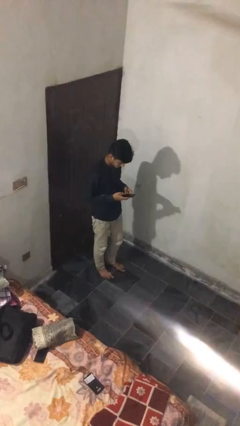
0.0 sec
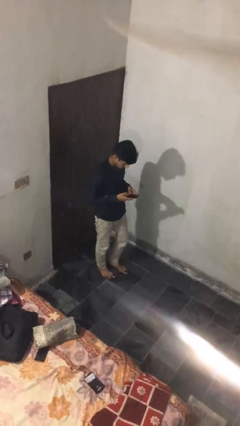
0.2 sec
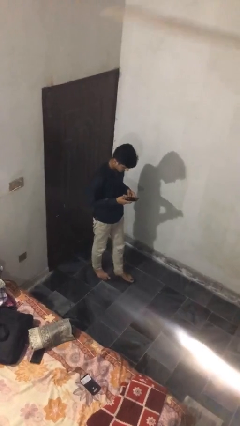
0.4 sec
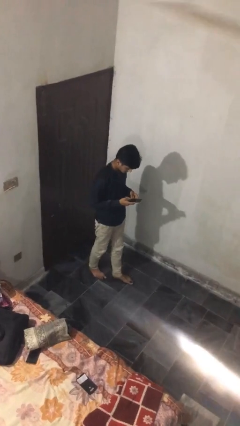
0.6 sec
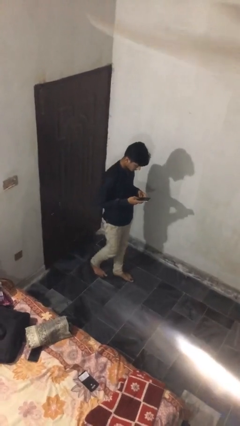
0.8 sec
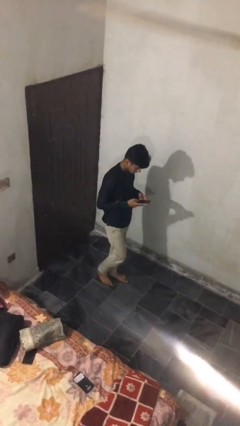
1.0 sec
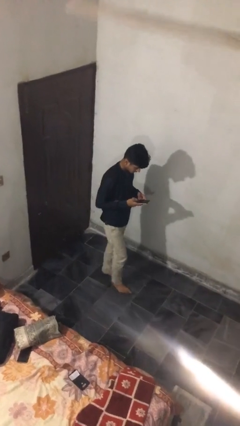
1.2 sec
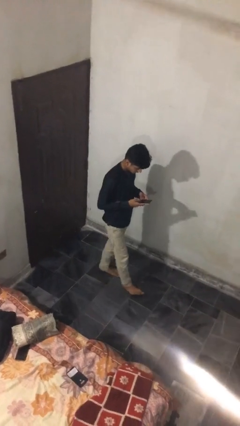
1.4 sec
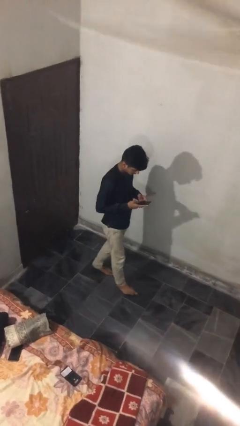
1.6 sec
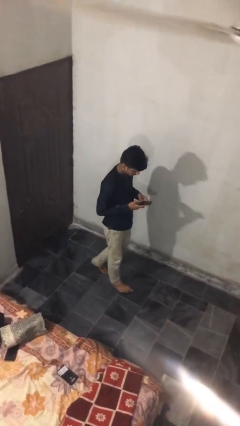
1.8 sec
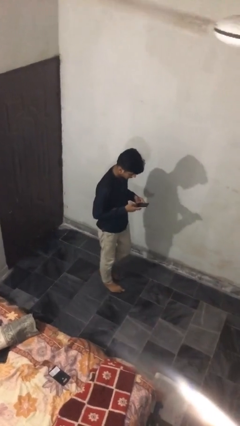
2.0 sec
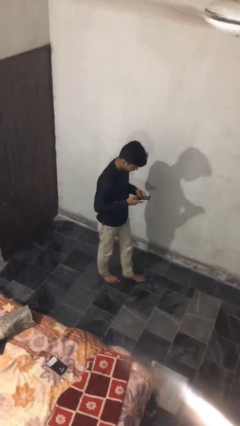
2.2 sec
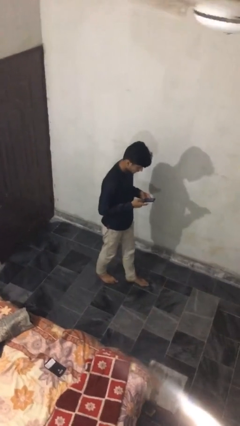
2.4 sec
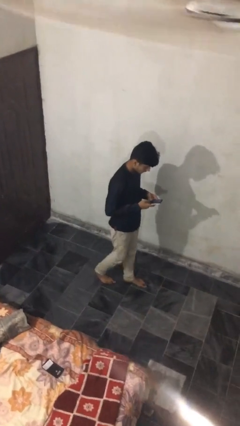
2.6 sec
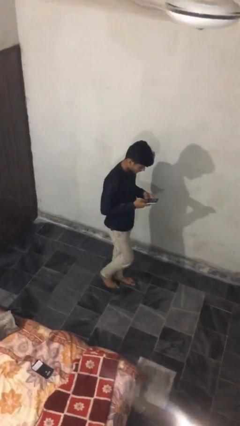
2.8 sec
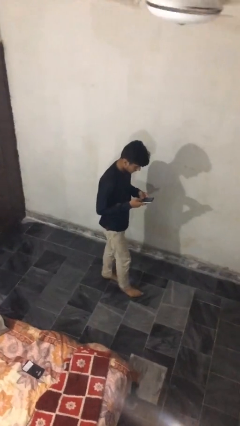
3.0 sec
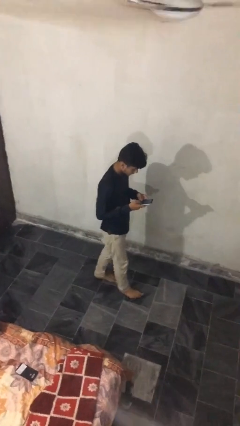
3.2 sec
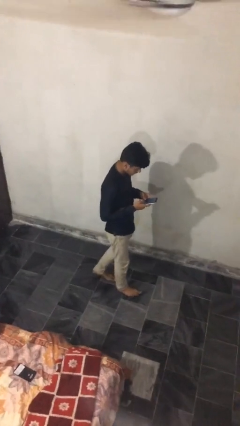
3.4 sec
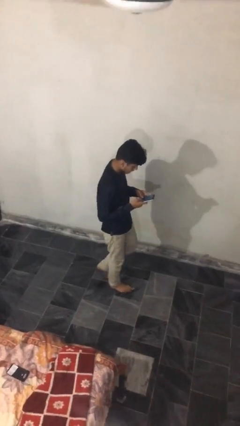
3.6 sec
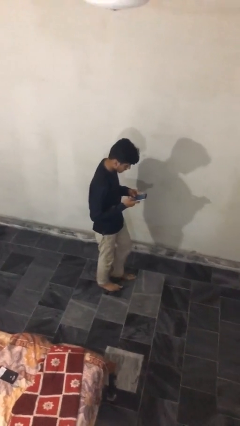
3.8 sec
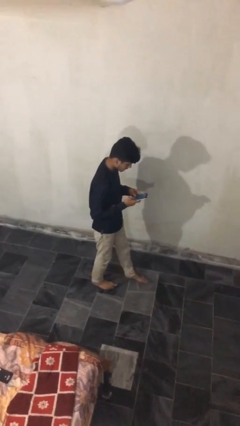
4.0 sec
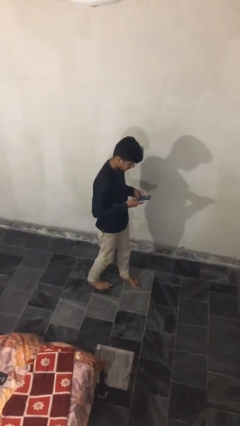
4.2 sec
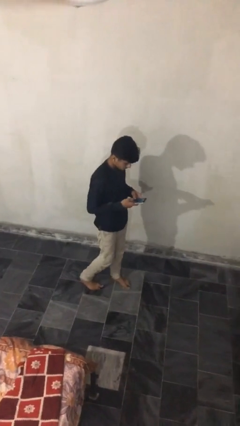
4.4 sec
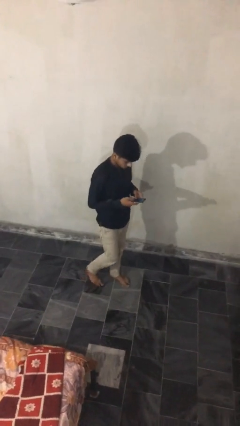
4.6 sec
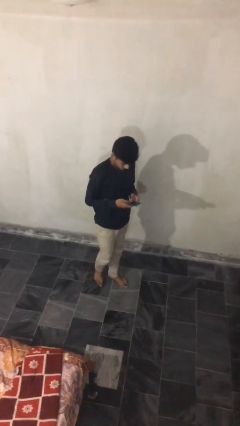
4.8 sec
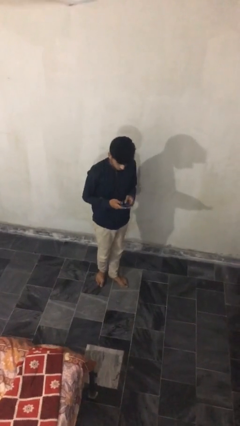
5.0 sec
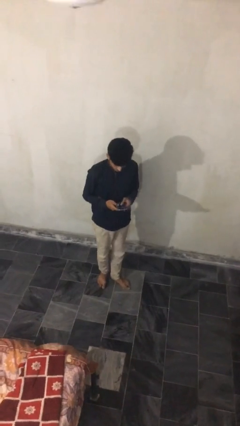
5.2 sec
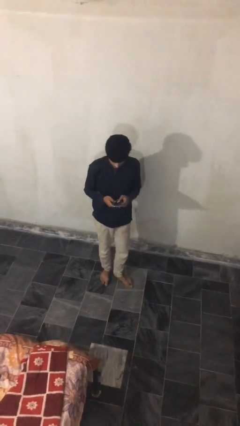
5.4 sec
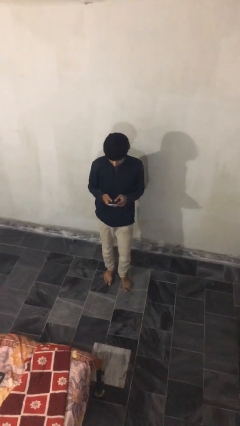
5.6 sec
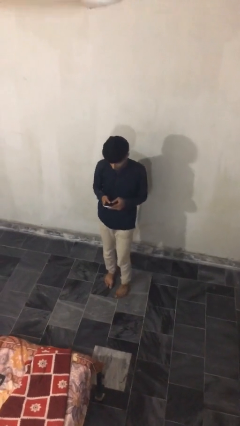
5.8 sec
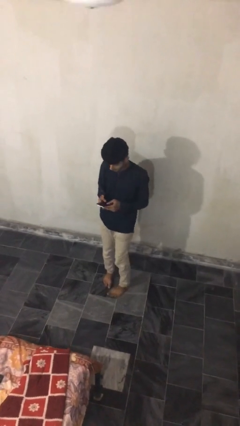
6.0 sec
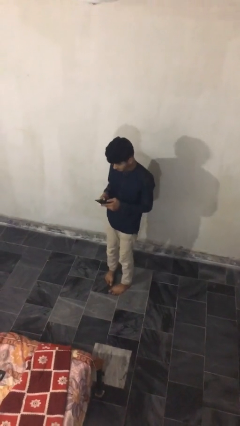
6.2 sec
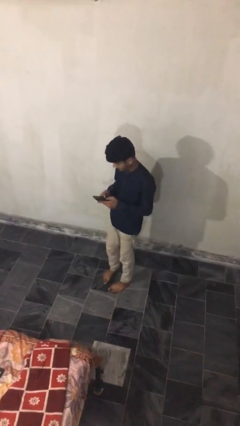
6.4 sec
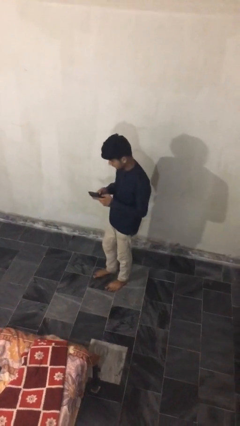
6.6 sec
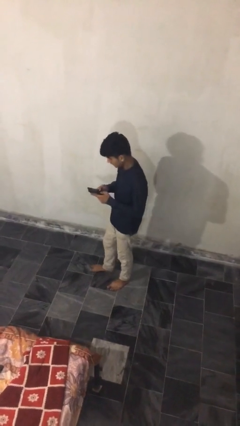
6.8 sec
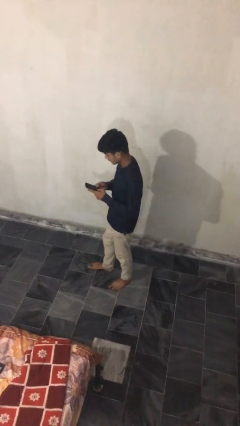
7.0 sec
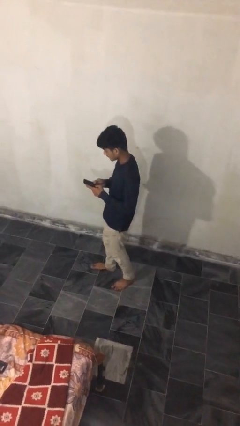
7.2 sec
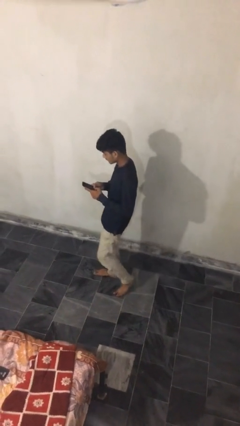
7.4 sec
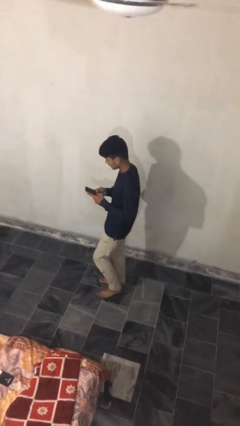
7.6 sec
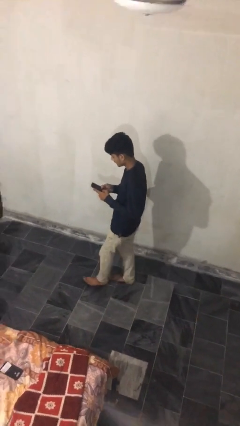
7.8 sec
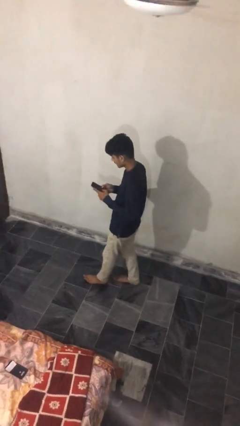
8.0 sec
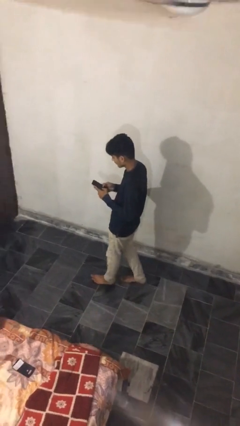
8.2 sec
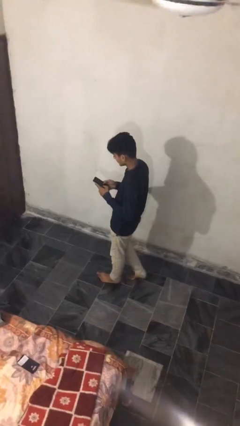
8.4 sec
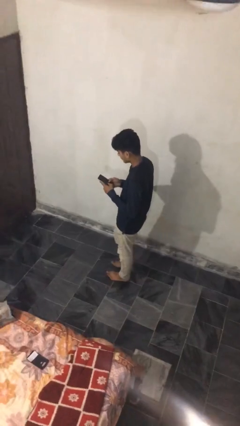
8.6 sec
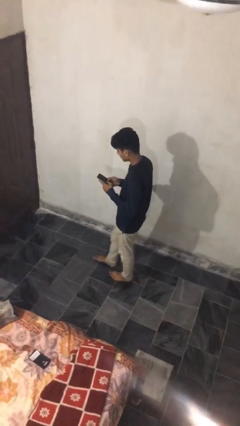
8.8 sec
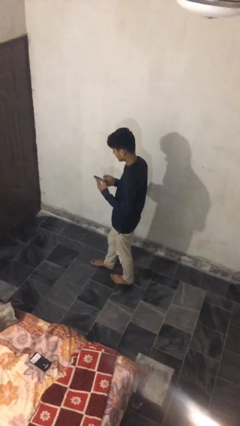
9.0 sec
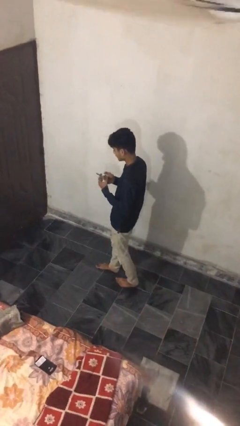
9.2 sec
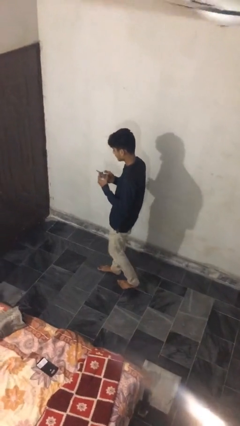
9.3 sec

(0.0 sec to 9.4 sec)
person texts on phone

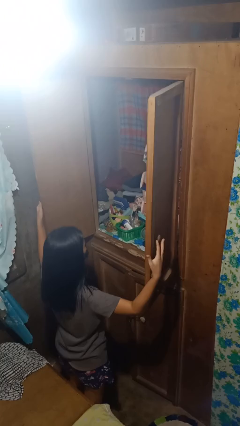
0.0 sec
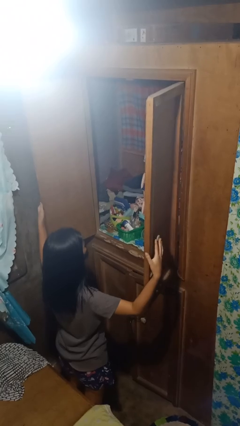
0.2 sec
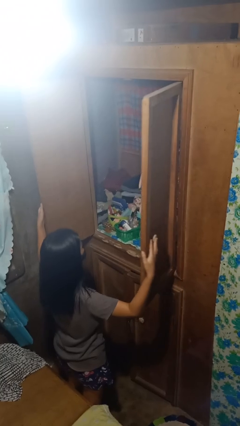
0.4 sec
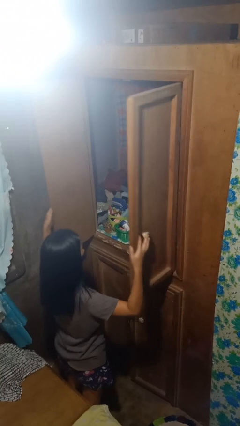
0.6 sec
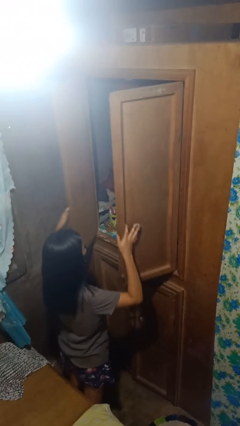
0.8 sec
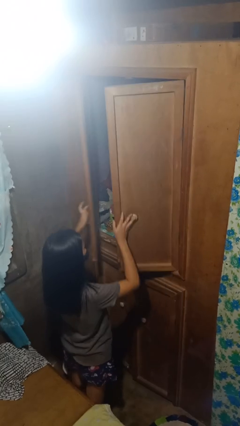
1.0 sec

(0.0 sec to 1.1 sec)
person closes closet door

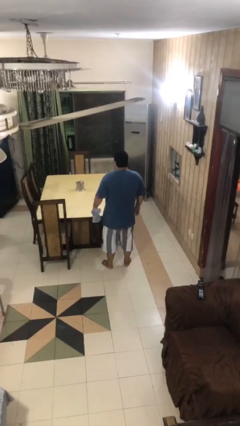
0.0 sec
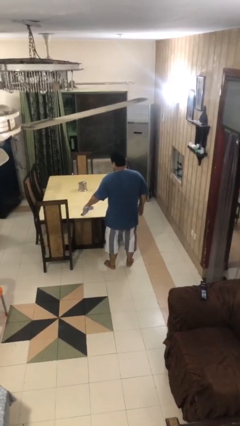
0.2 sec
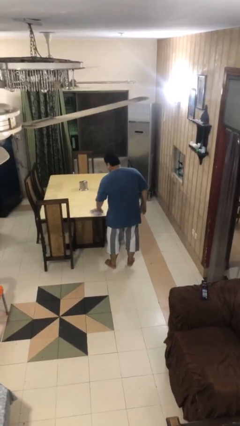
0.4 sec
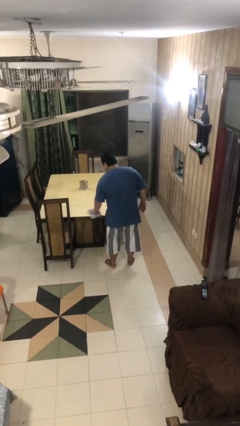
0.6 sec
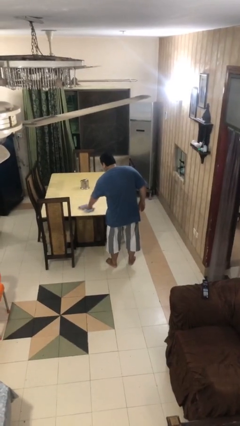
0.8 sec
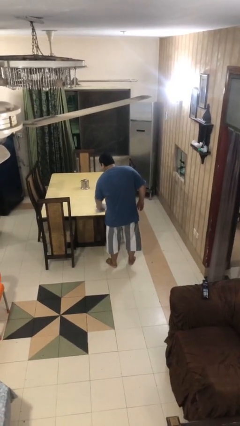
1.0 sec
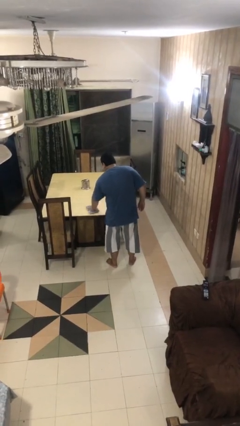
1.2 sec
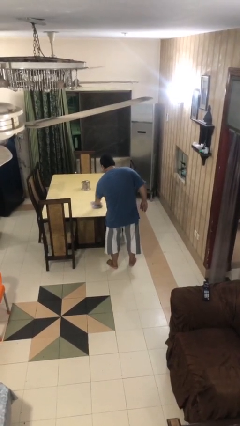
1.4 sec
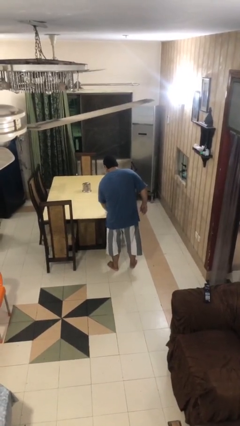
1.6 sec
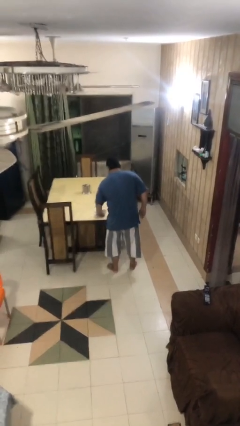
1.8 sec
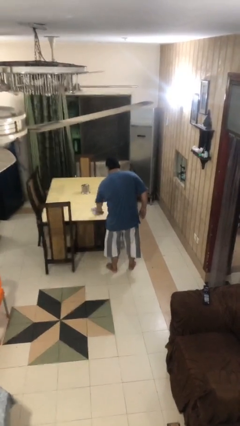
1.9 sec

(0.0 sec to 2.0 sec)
person cleans table with rag

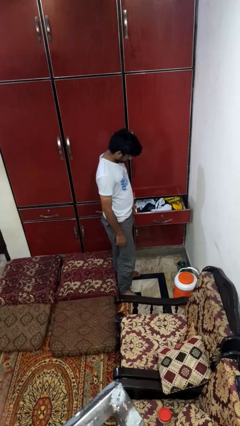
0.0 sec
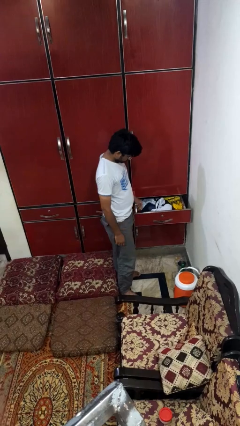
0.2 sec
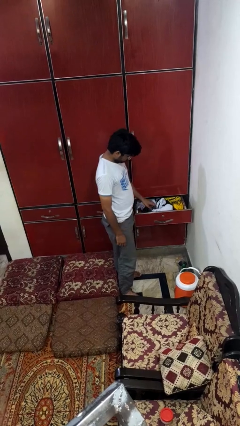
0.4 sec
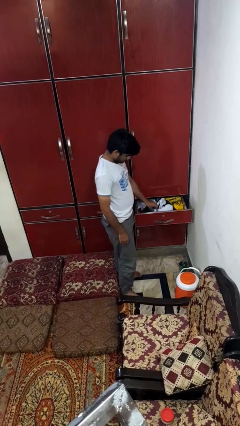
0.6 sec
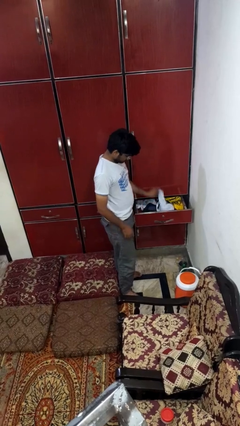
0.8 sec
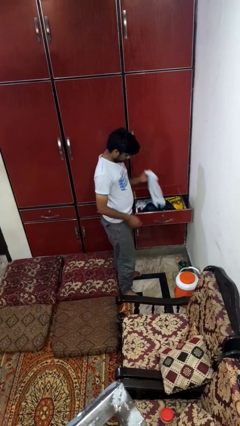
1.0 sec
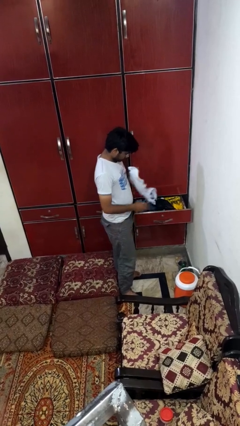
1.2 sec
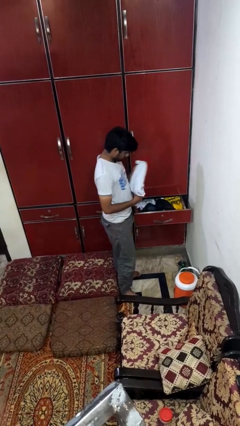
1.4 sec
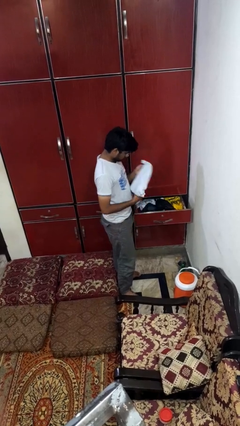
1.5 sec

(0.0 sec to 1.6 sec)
person takes clothes from dresser

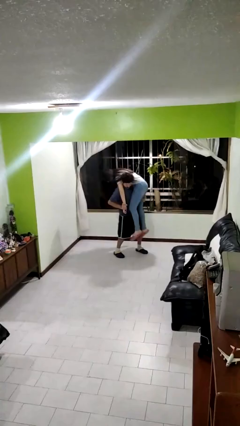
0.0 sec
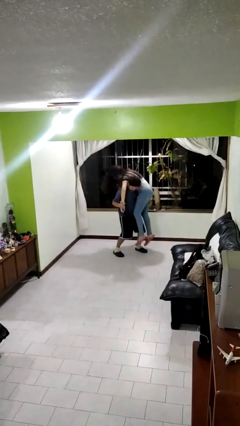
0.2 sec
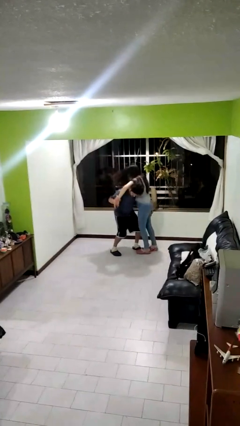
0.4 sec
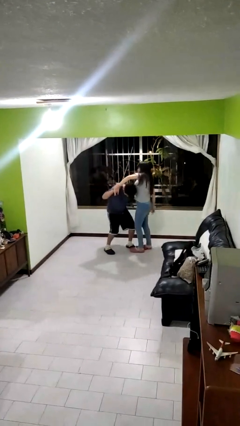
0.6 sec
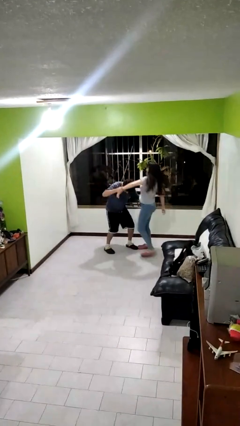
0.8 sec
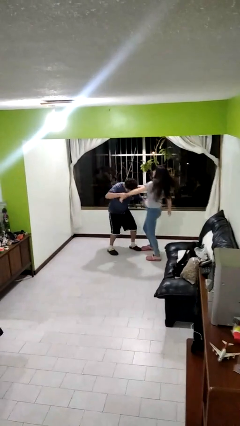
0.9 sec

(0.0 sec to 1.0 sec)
person puts down person

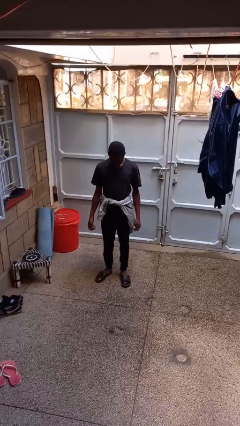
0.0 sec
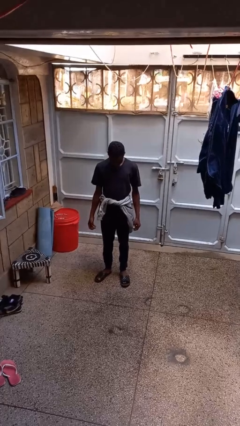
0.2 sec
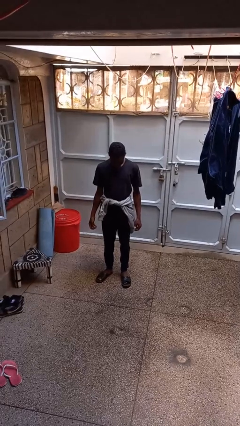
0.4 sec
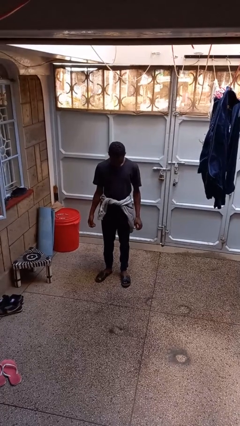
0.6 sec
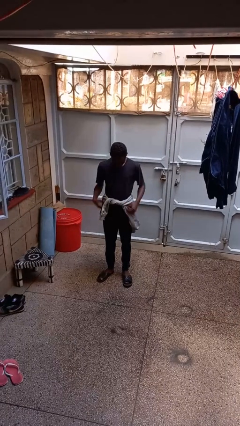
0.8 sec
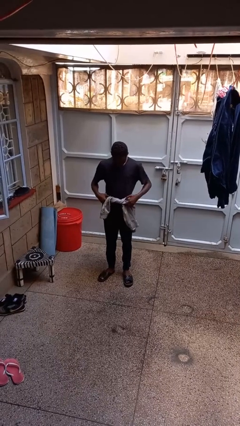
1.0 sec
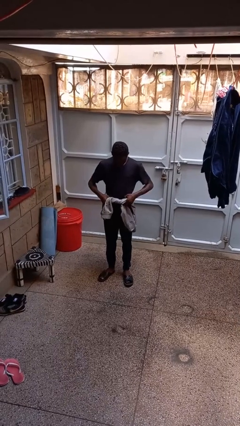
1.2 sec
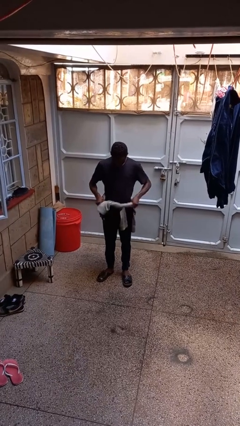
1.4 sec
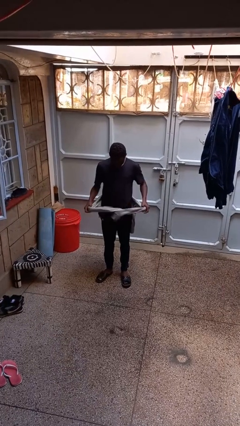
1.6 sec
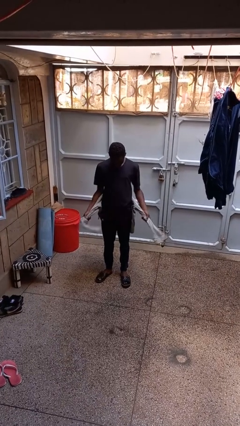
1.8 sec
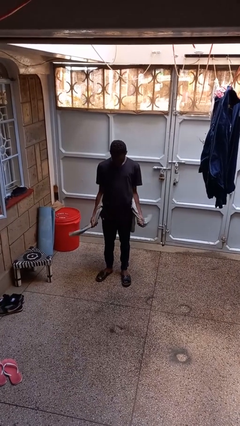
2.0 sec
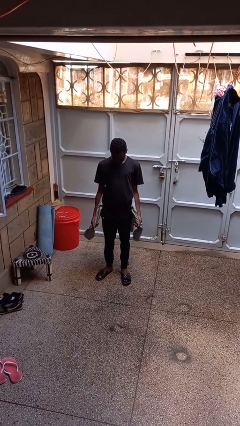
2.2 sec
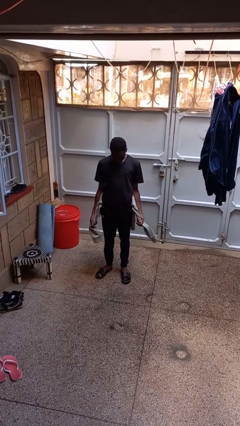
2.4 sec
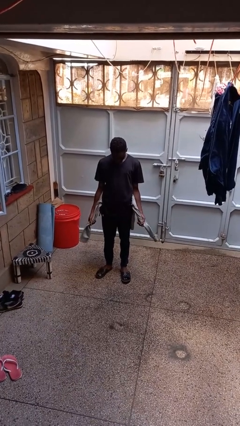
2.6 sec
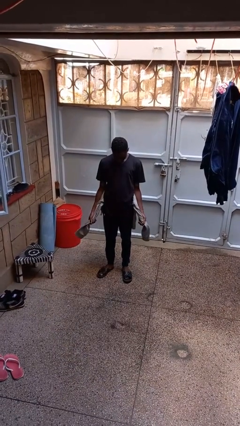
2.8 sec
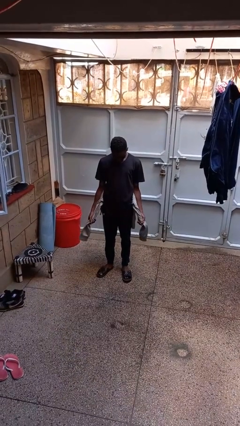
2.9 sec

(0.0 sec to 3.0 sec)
person unties jacket around waist
